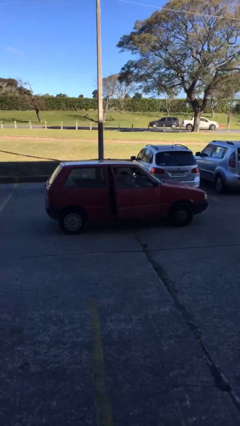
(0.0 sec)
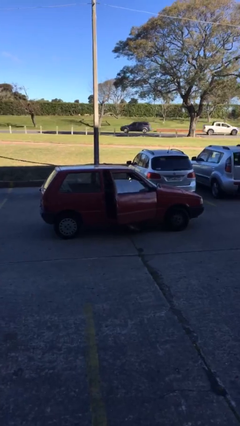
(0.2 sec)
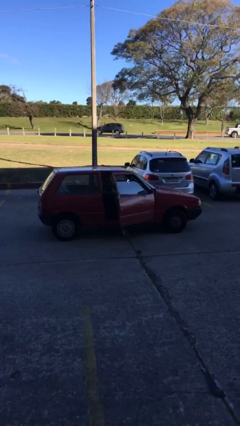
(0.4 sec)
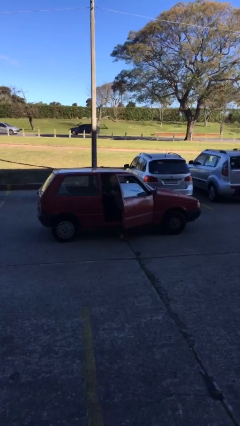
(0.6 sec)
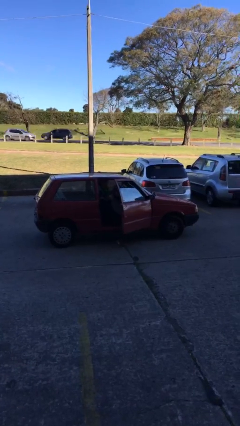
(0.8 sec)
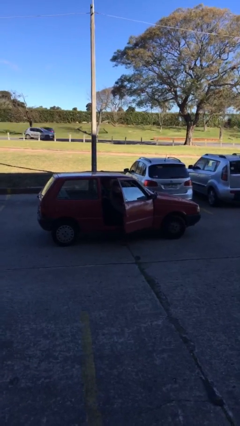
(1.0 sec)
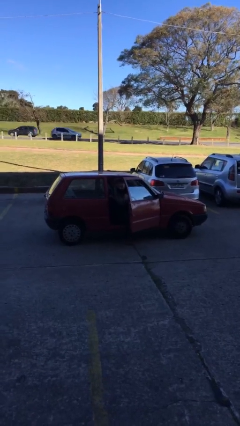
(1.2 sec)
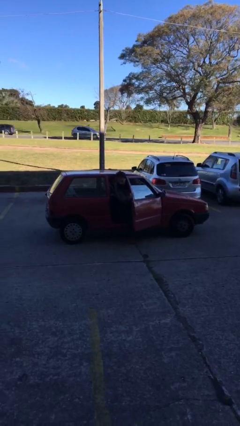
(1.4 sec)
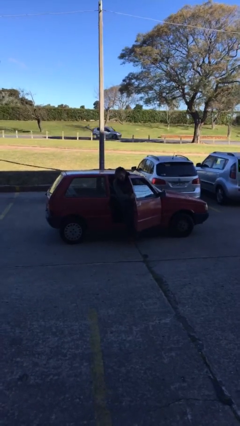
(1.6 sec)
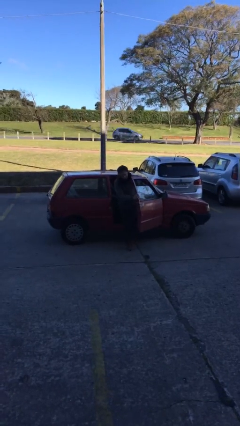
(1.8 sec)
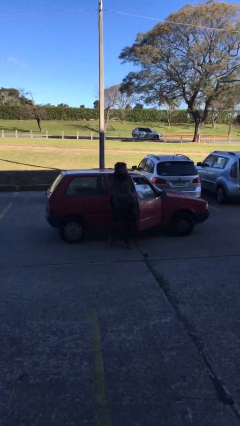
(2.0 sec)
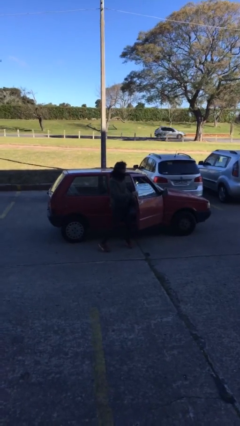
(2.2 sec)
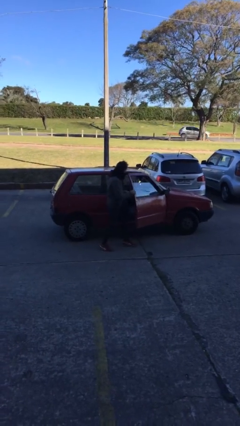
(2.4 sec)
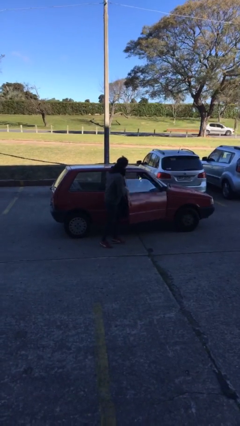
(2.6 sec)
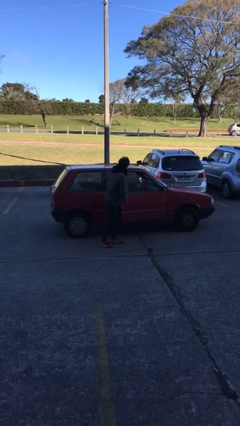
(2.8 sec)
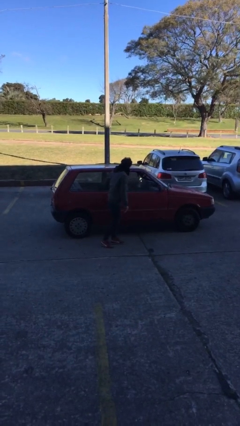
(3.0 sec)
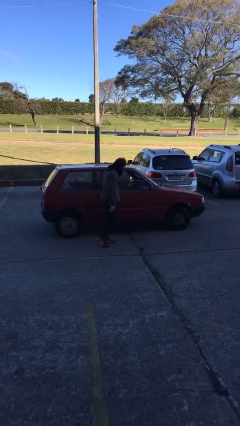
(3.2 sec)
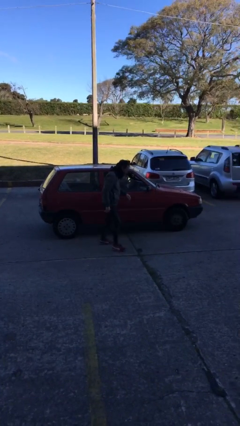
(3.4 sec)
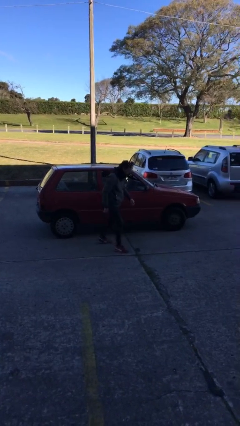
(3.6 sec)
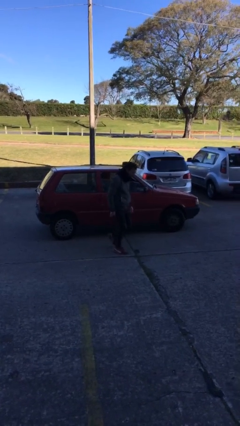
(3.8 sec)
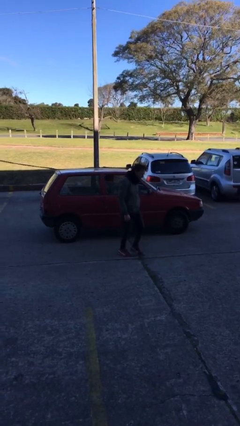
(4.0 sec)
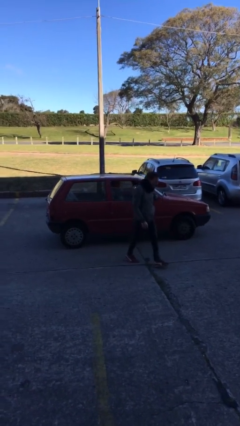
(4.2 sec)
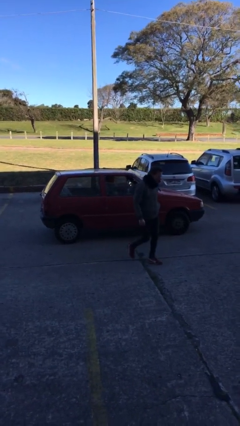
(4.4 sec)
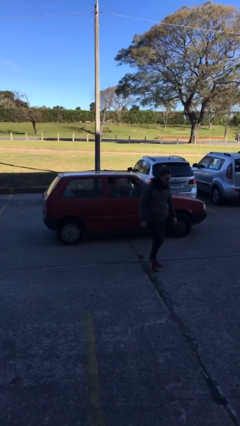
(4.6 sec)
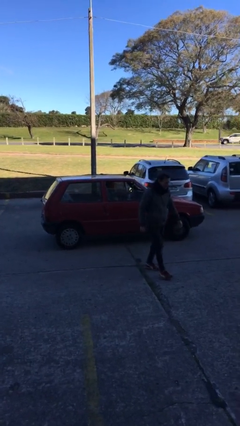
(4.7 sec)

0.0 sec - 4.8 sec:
car drops off person

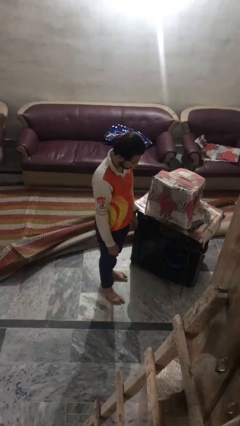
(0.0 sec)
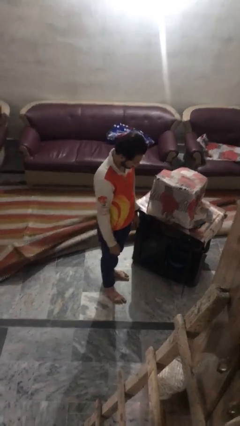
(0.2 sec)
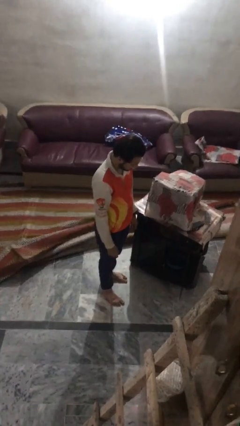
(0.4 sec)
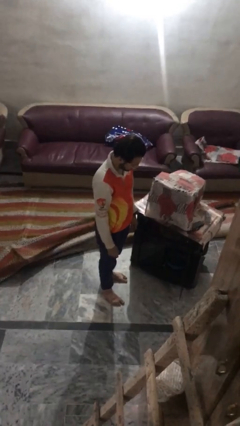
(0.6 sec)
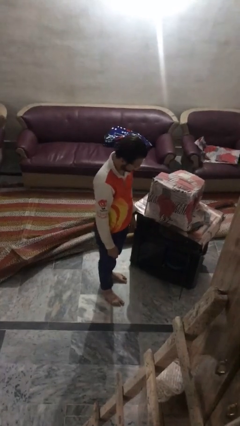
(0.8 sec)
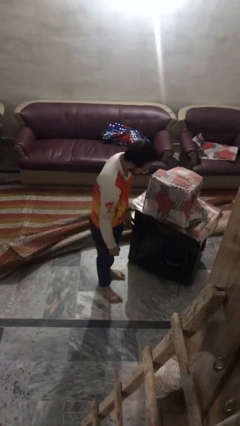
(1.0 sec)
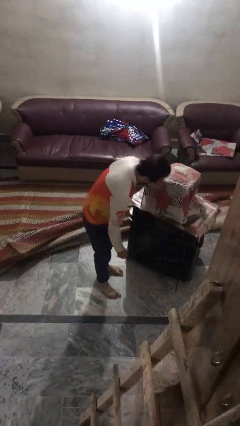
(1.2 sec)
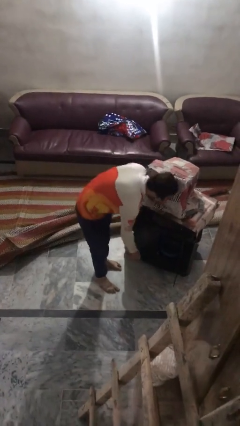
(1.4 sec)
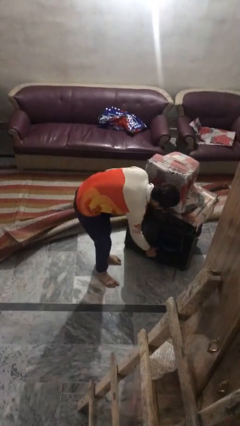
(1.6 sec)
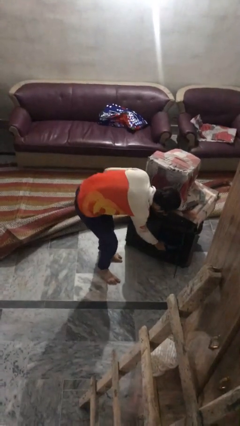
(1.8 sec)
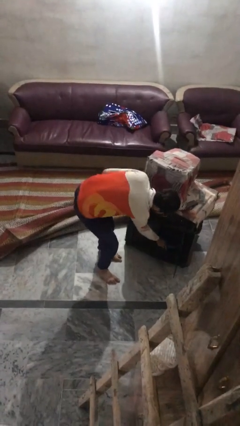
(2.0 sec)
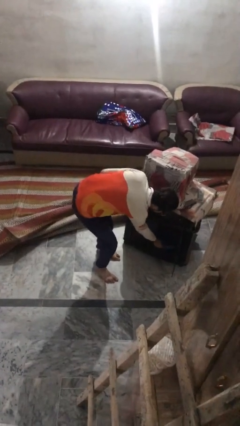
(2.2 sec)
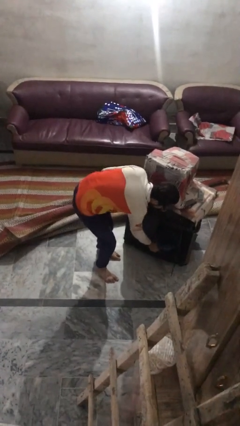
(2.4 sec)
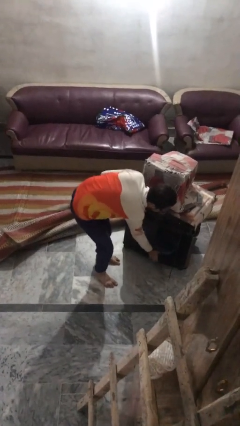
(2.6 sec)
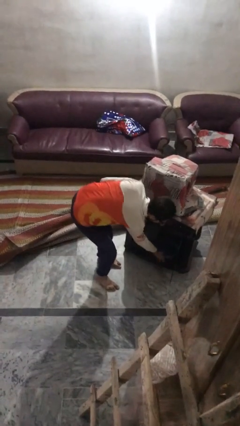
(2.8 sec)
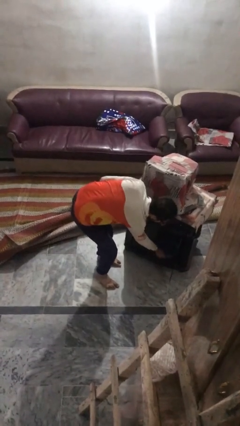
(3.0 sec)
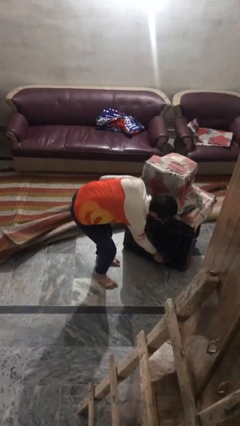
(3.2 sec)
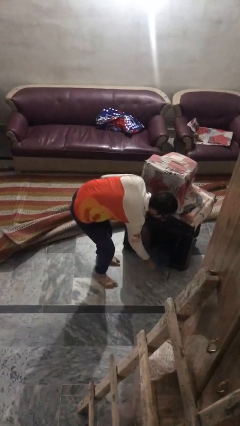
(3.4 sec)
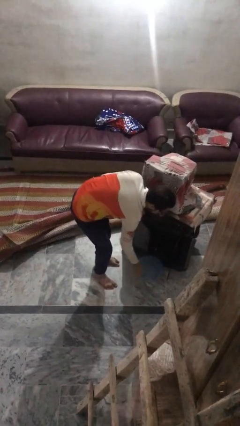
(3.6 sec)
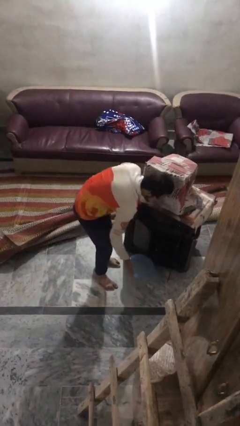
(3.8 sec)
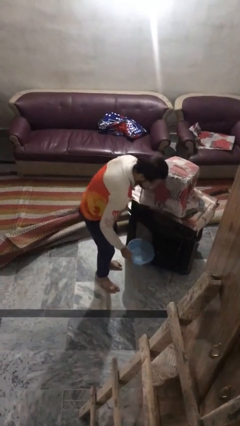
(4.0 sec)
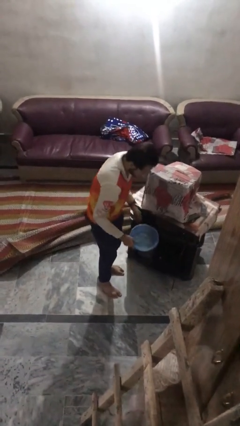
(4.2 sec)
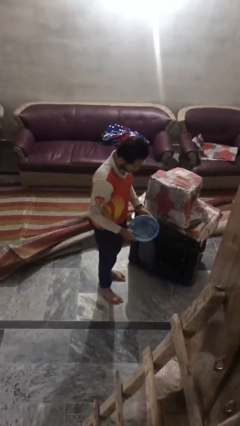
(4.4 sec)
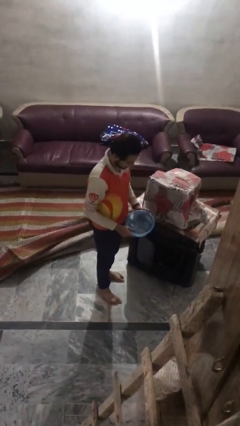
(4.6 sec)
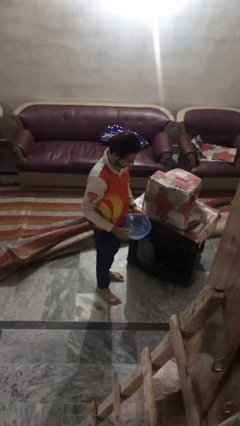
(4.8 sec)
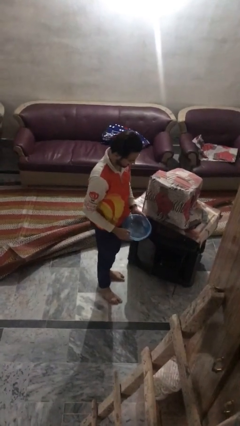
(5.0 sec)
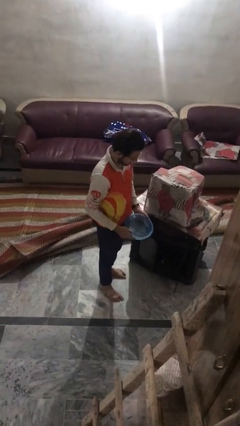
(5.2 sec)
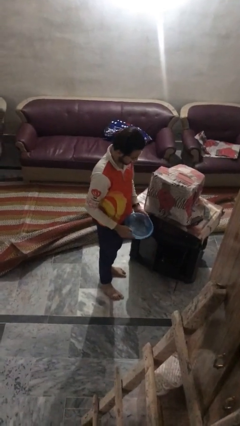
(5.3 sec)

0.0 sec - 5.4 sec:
person picks up object from cabinet

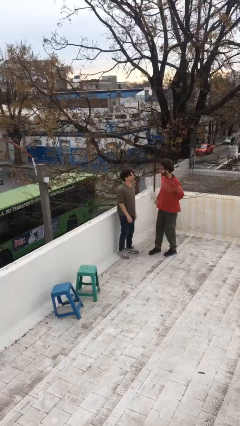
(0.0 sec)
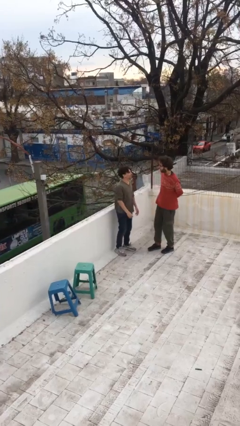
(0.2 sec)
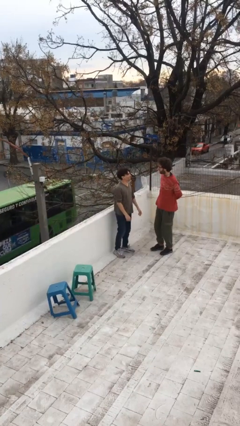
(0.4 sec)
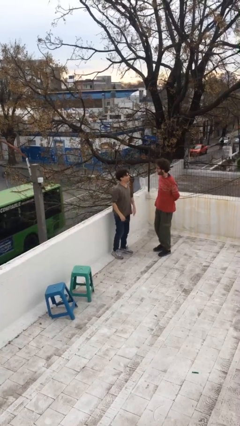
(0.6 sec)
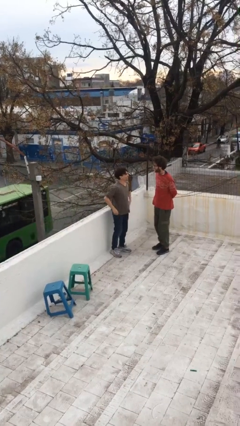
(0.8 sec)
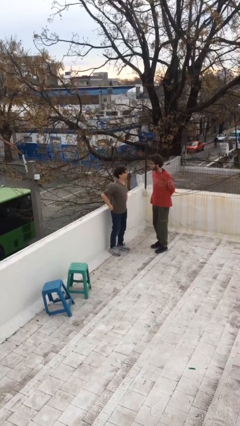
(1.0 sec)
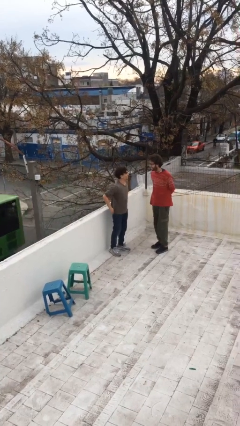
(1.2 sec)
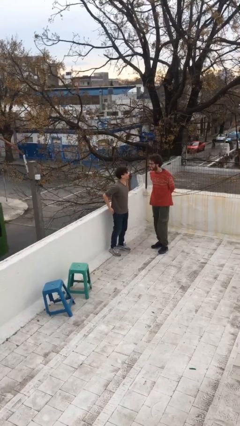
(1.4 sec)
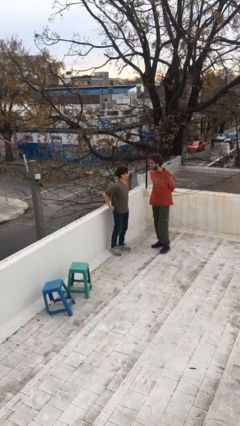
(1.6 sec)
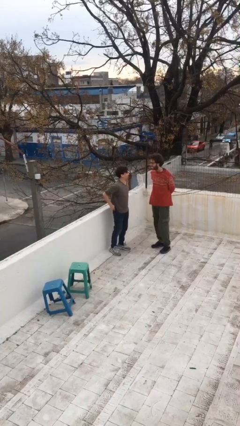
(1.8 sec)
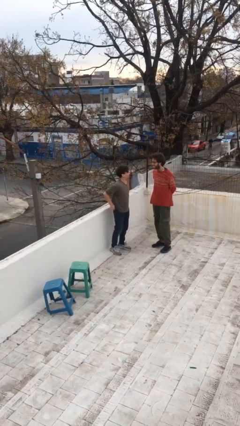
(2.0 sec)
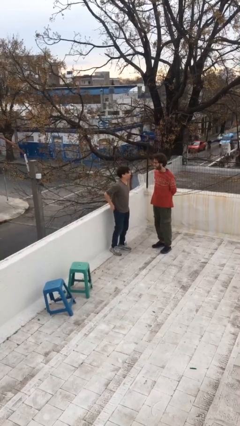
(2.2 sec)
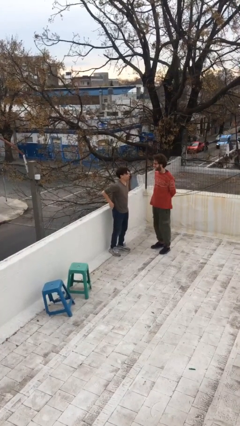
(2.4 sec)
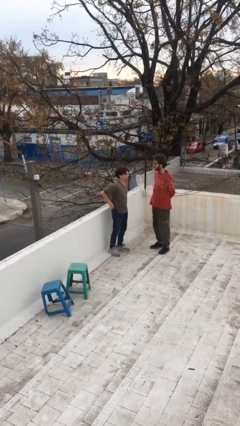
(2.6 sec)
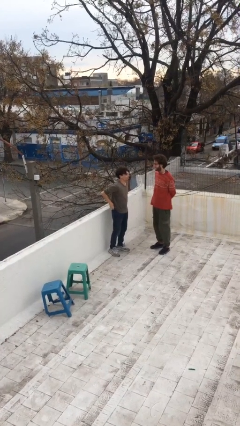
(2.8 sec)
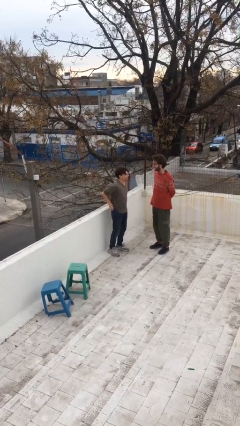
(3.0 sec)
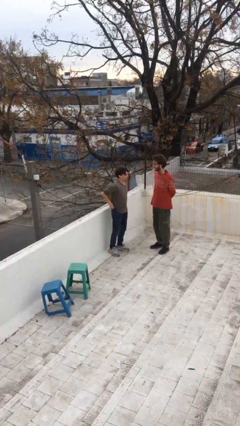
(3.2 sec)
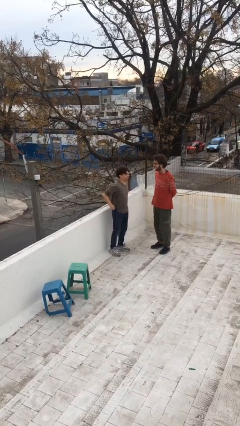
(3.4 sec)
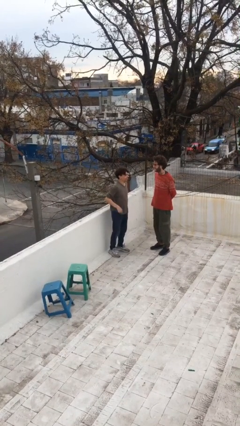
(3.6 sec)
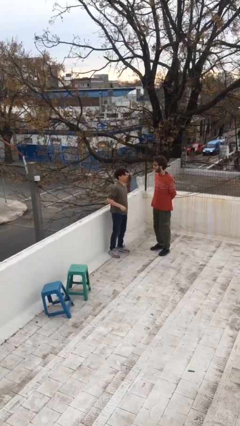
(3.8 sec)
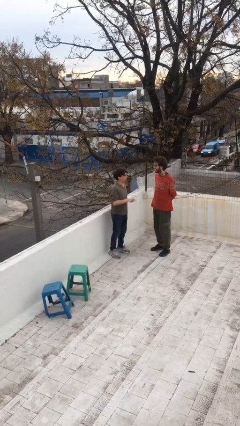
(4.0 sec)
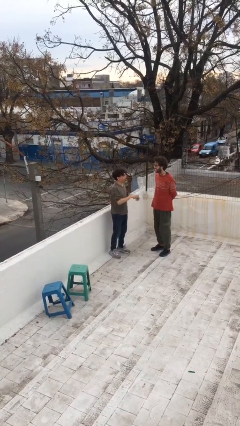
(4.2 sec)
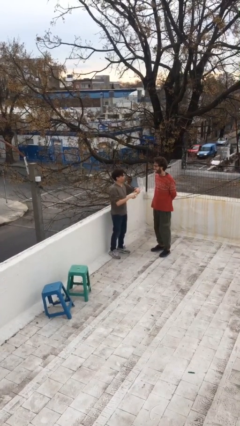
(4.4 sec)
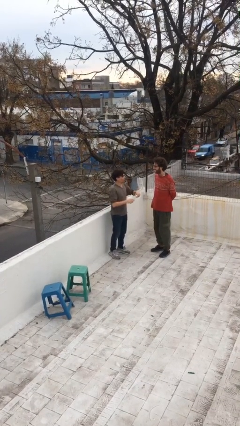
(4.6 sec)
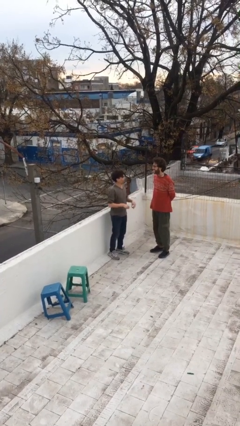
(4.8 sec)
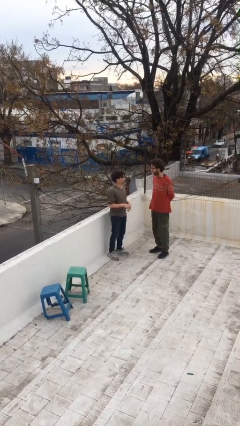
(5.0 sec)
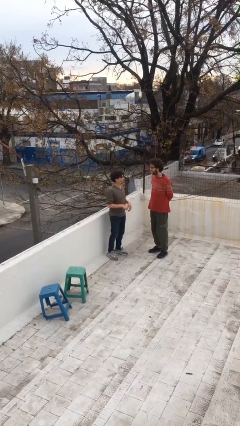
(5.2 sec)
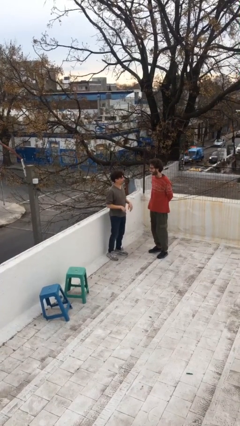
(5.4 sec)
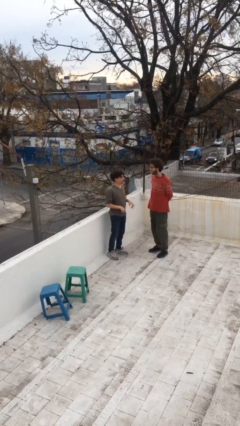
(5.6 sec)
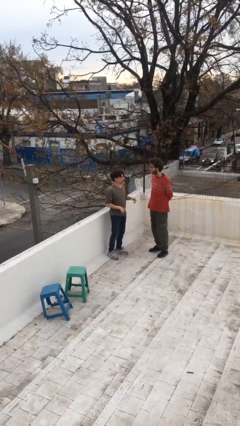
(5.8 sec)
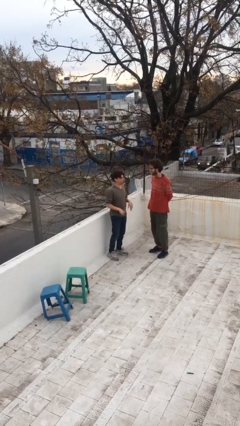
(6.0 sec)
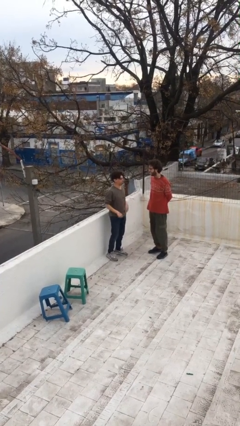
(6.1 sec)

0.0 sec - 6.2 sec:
person talks to person

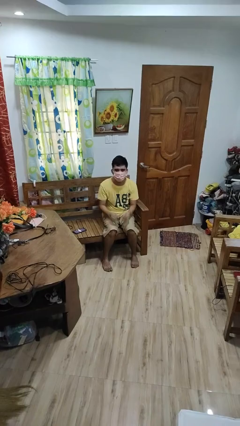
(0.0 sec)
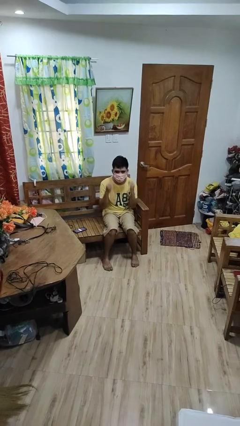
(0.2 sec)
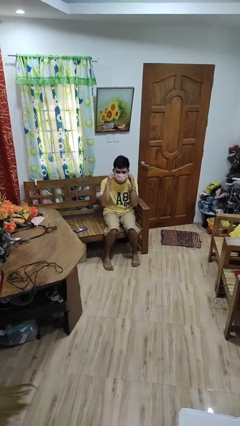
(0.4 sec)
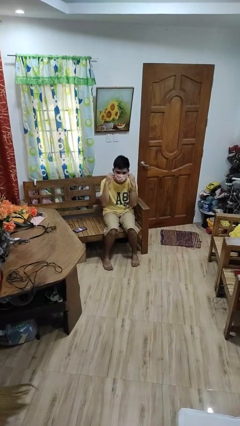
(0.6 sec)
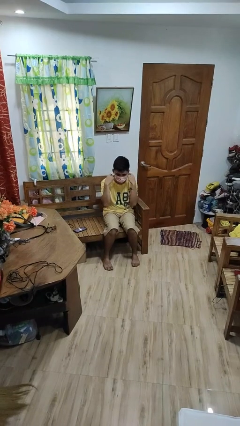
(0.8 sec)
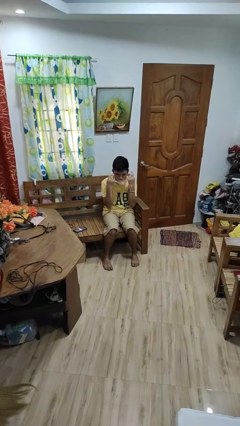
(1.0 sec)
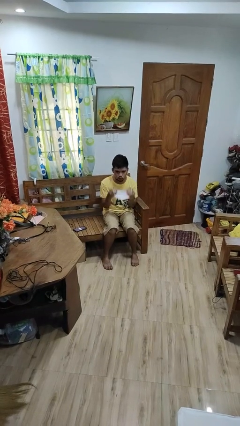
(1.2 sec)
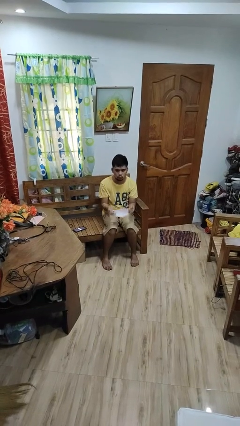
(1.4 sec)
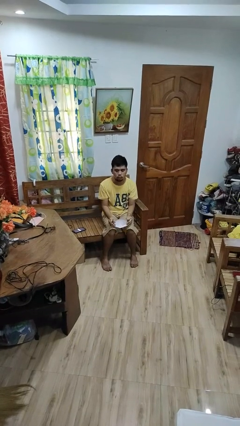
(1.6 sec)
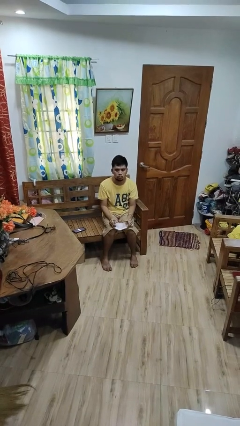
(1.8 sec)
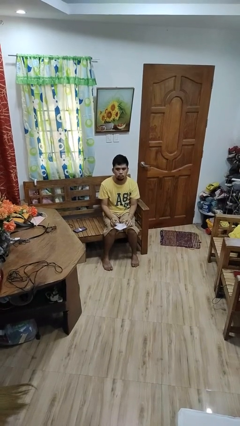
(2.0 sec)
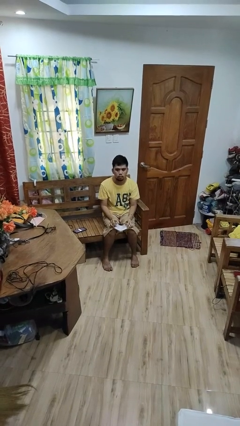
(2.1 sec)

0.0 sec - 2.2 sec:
person takes off facemask
